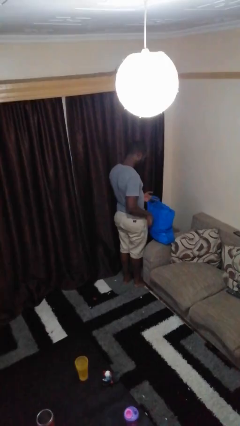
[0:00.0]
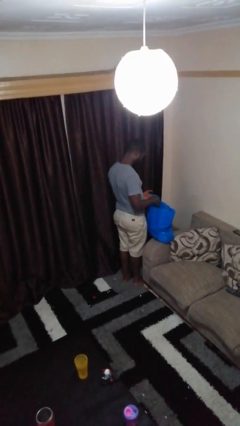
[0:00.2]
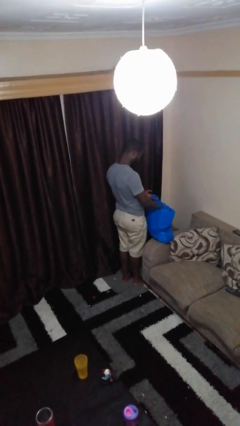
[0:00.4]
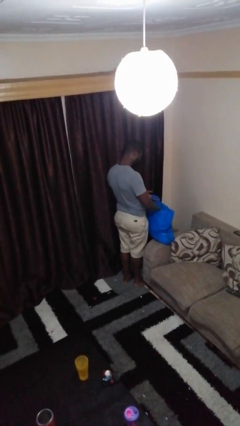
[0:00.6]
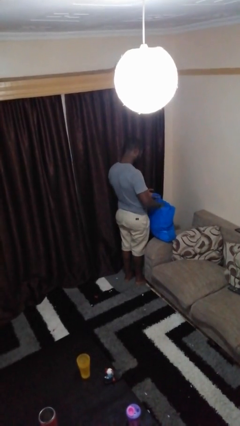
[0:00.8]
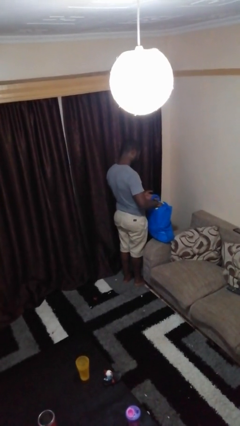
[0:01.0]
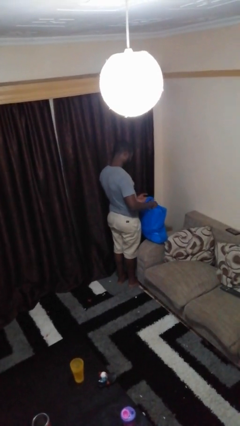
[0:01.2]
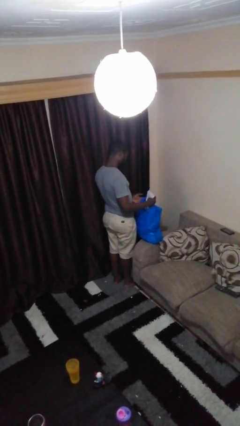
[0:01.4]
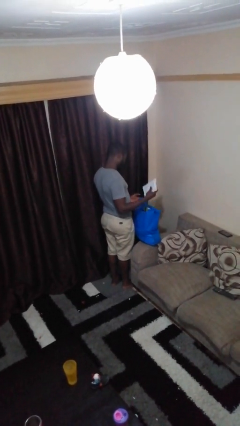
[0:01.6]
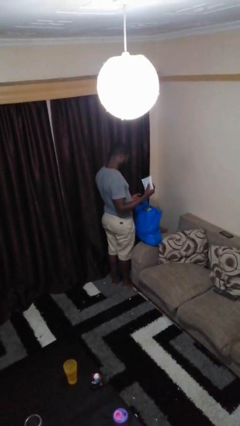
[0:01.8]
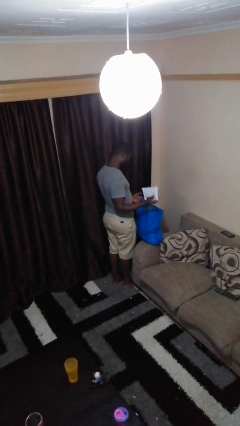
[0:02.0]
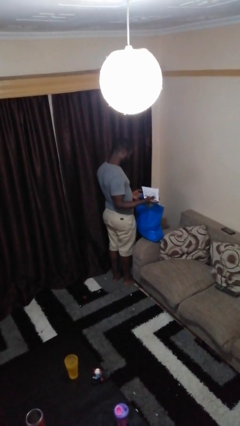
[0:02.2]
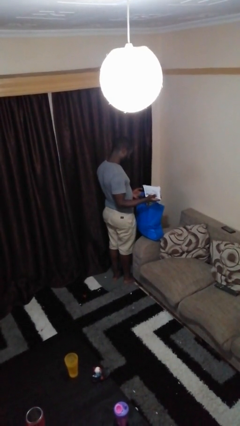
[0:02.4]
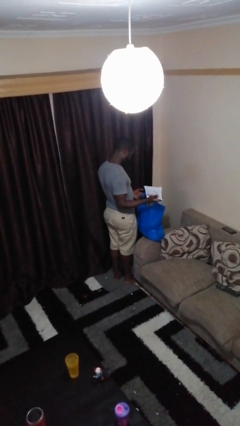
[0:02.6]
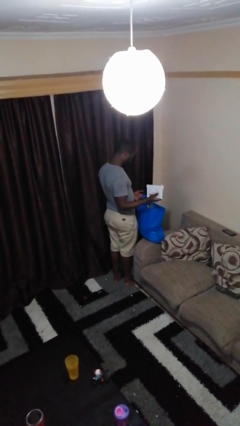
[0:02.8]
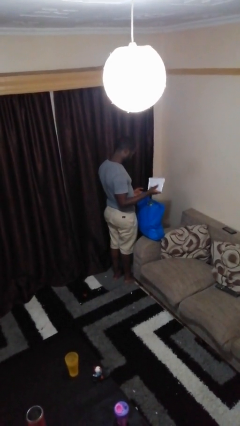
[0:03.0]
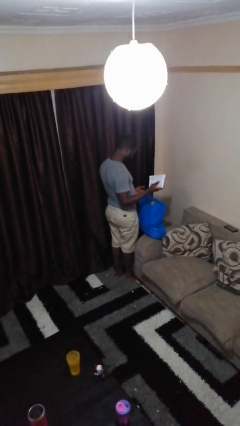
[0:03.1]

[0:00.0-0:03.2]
person takes object from bag

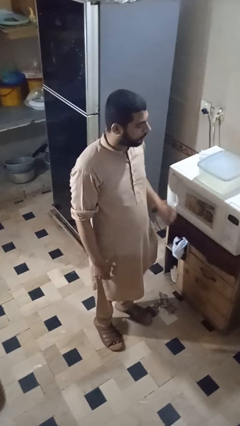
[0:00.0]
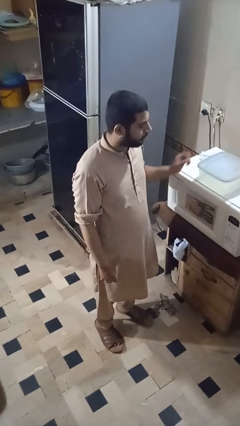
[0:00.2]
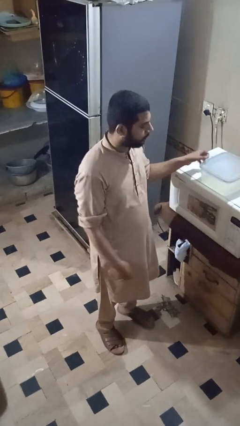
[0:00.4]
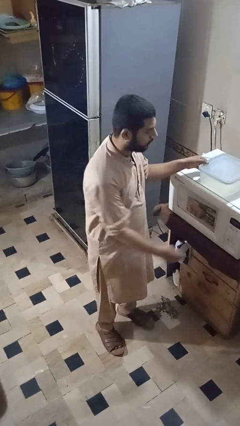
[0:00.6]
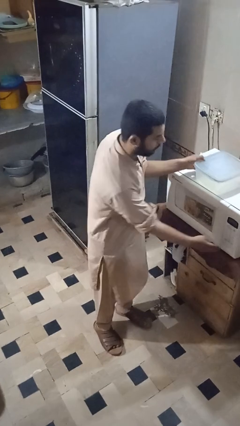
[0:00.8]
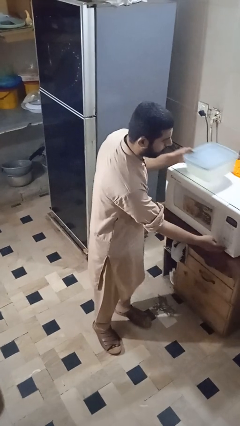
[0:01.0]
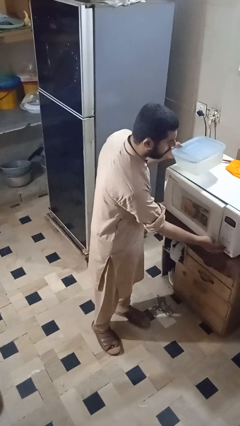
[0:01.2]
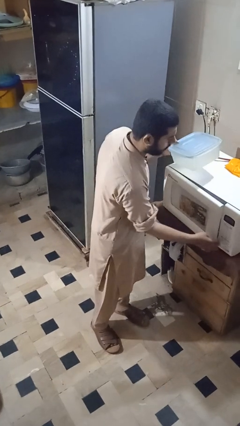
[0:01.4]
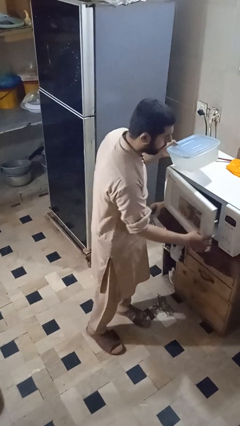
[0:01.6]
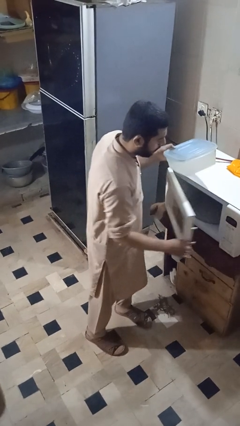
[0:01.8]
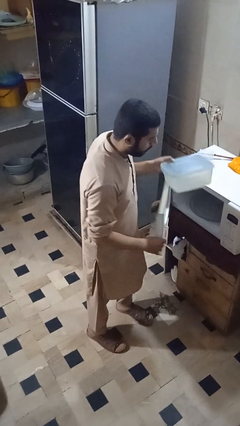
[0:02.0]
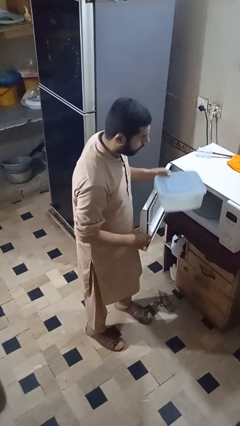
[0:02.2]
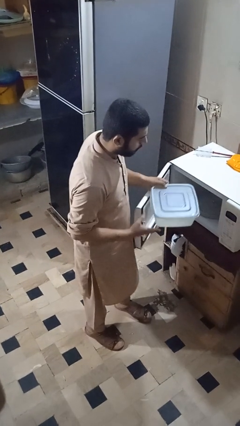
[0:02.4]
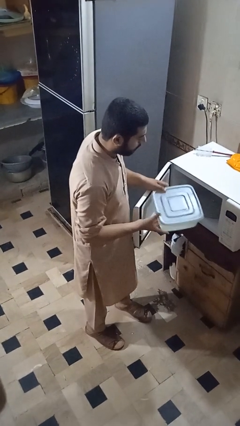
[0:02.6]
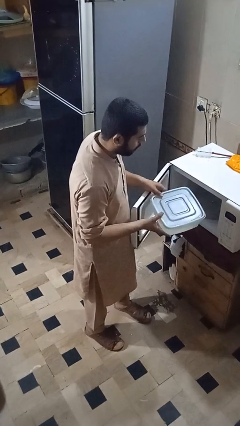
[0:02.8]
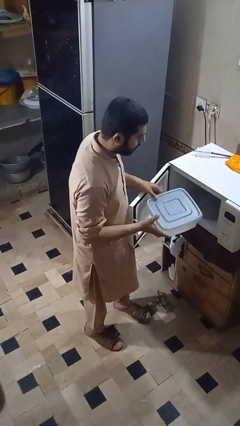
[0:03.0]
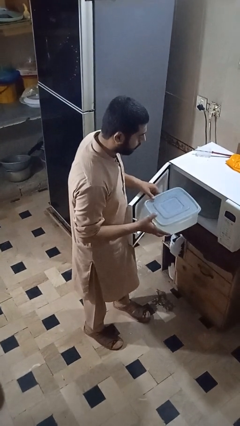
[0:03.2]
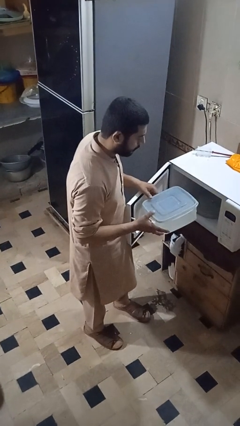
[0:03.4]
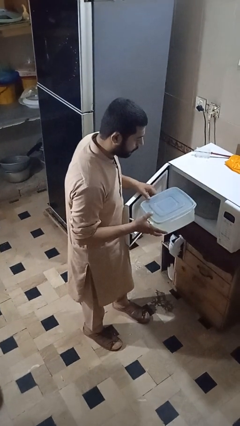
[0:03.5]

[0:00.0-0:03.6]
person opens microwave

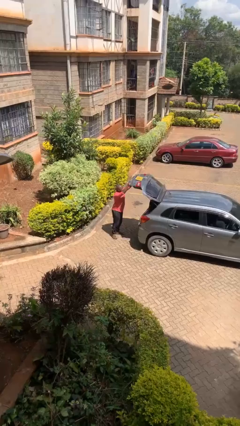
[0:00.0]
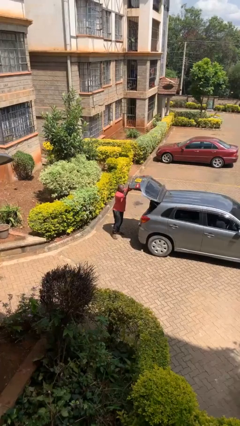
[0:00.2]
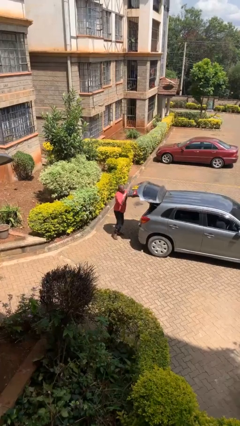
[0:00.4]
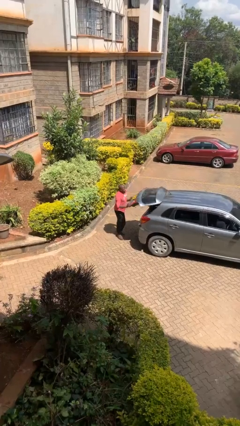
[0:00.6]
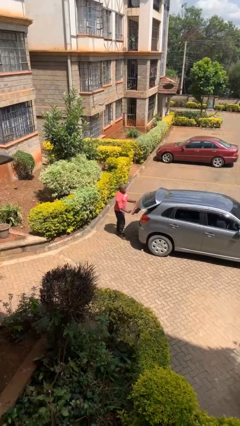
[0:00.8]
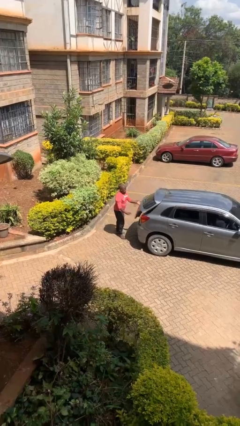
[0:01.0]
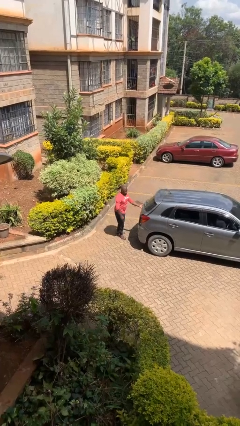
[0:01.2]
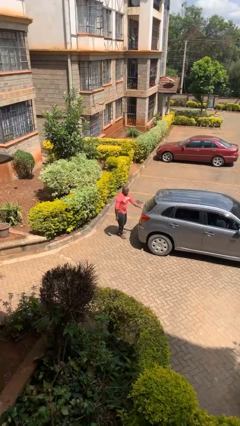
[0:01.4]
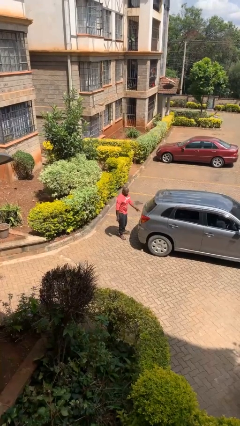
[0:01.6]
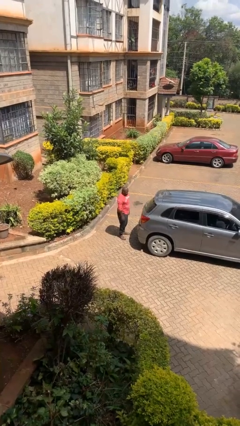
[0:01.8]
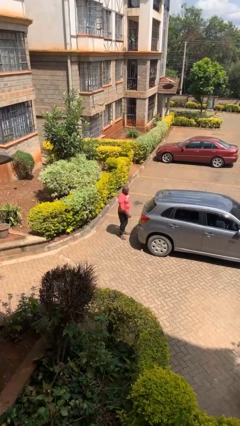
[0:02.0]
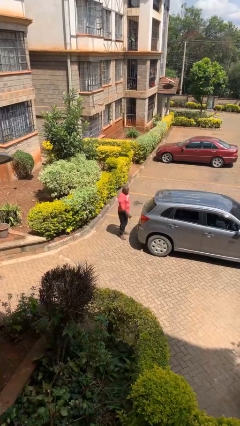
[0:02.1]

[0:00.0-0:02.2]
person closes car trunk

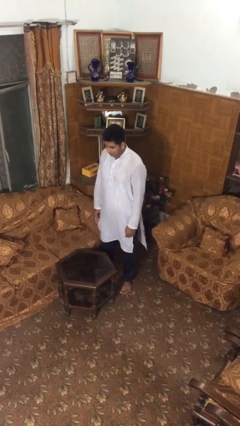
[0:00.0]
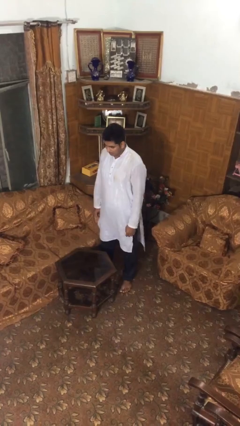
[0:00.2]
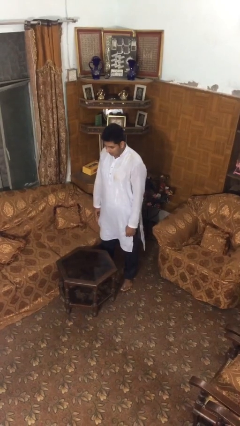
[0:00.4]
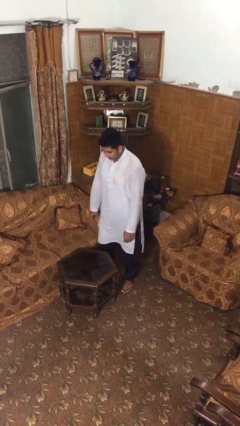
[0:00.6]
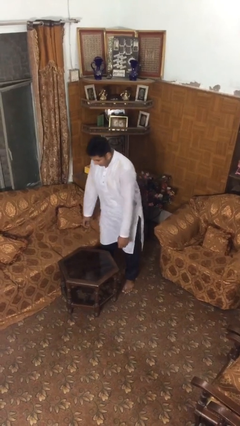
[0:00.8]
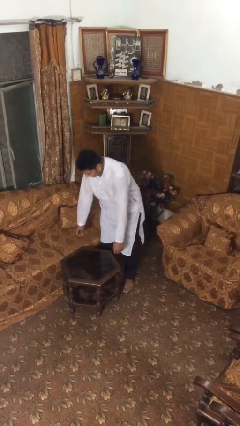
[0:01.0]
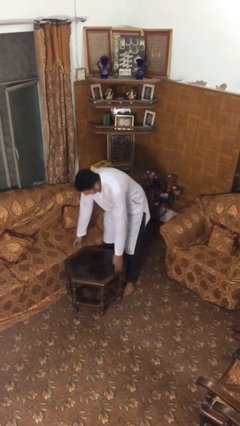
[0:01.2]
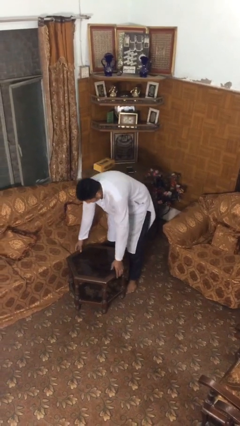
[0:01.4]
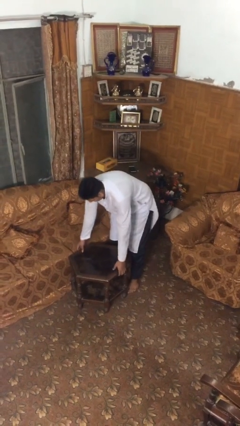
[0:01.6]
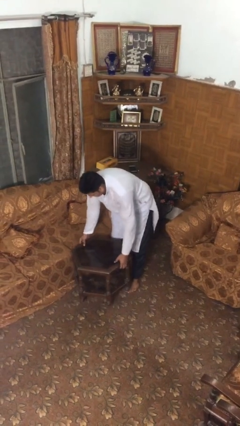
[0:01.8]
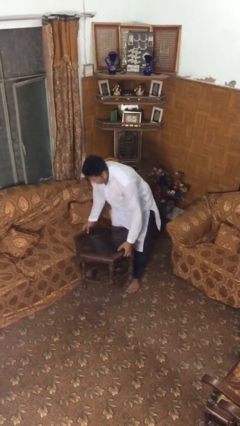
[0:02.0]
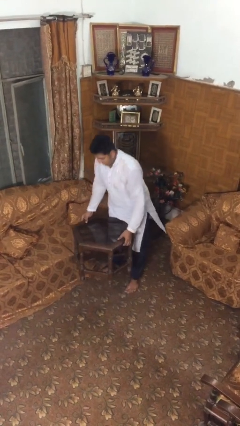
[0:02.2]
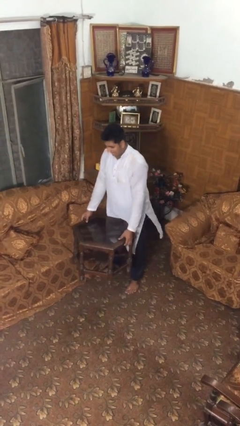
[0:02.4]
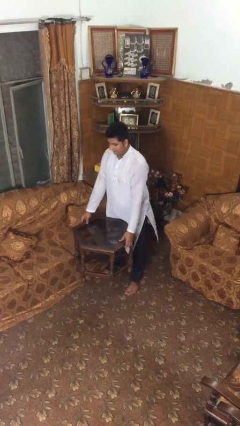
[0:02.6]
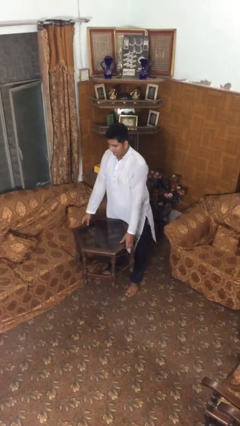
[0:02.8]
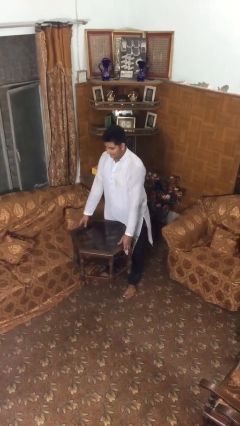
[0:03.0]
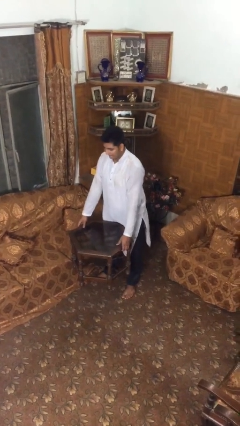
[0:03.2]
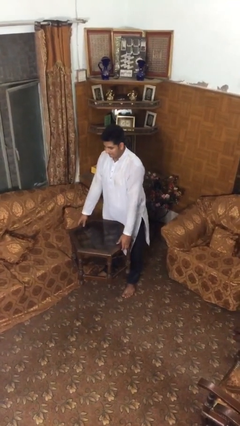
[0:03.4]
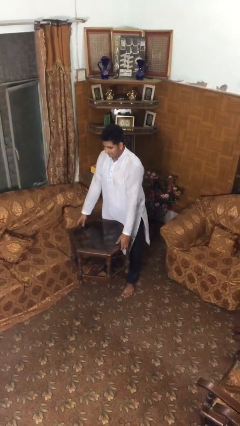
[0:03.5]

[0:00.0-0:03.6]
person picks up object from floor

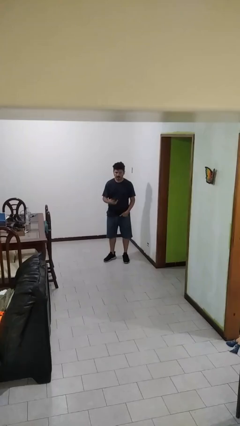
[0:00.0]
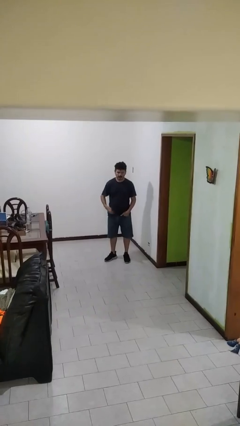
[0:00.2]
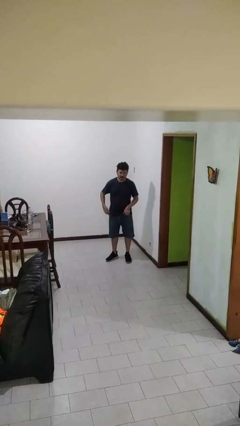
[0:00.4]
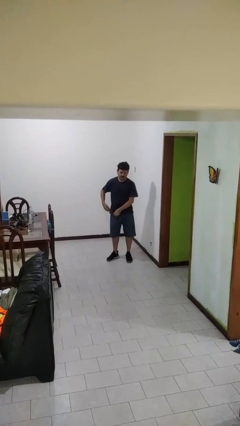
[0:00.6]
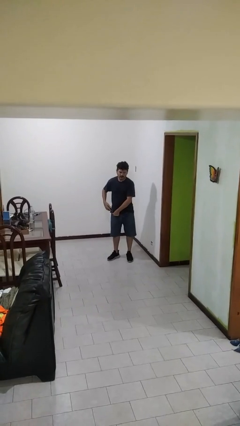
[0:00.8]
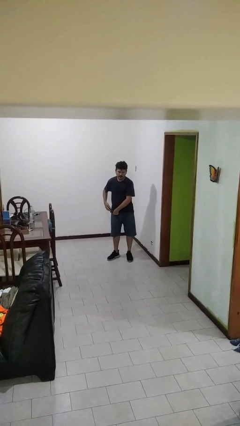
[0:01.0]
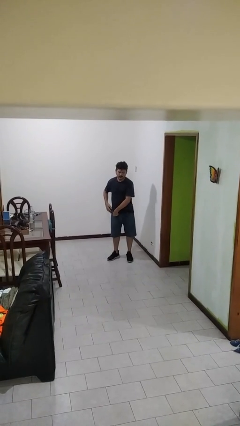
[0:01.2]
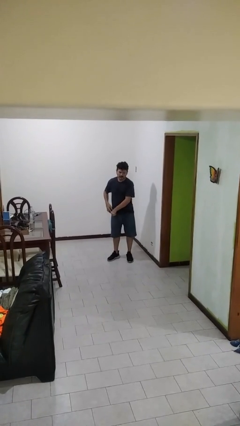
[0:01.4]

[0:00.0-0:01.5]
person puts phone into pocket

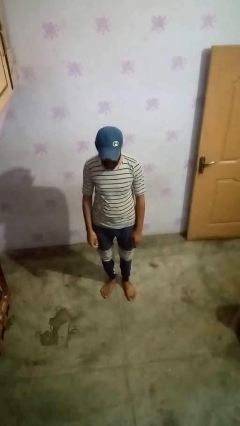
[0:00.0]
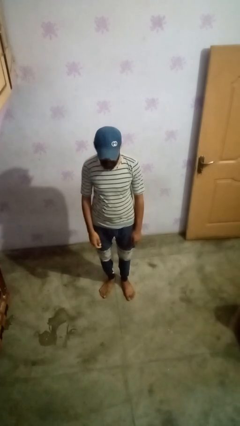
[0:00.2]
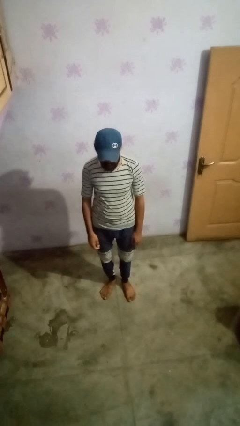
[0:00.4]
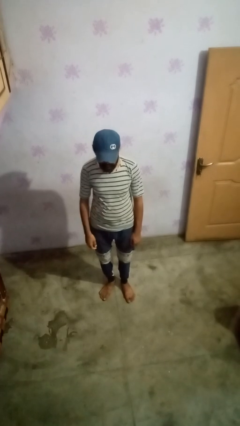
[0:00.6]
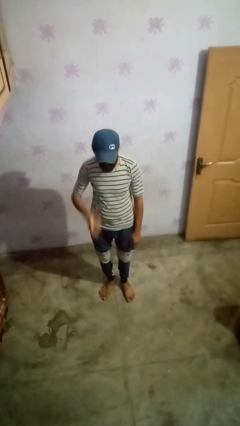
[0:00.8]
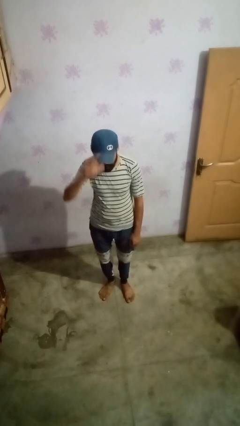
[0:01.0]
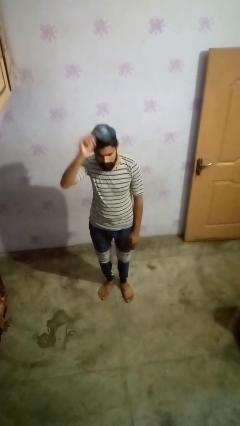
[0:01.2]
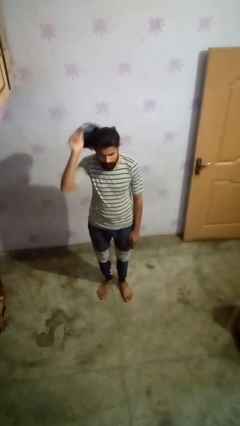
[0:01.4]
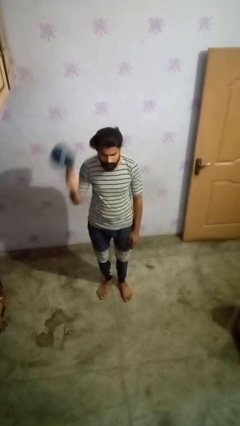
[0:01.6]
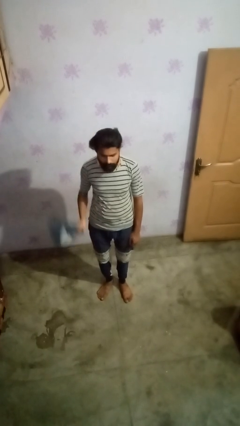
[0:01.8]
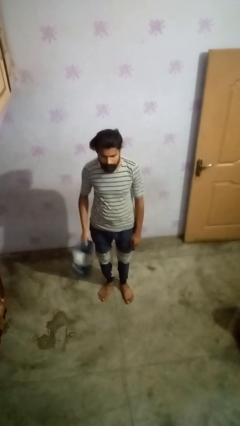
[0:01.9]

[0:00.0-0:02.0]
person takes off hat

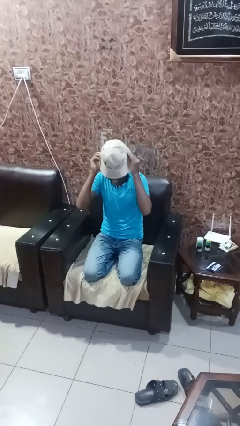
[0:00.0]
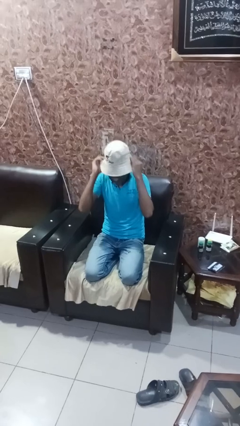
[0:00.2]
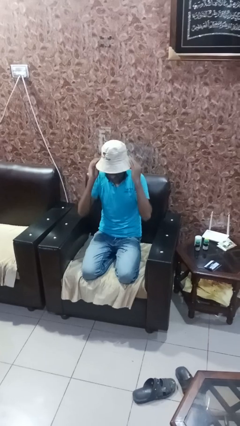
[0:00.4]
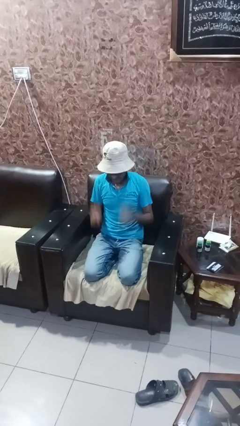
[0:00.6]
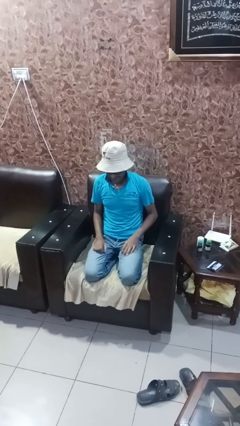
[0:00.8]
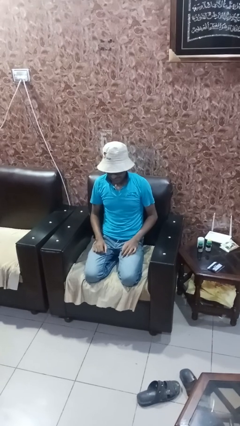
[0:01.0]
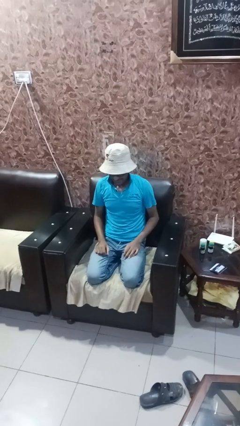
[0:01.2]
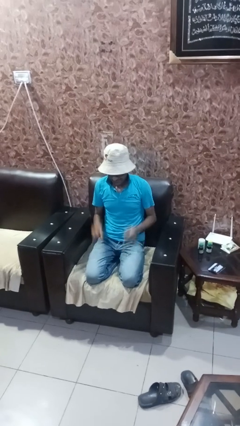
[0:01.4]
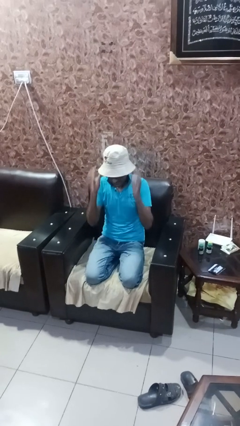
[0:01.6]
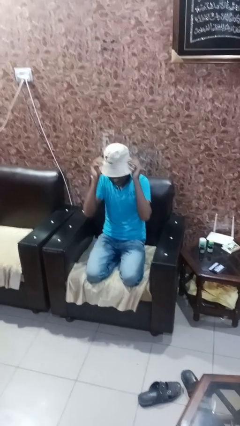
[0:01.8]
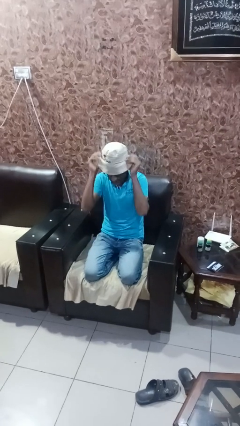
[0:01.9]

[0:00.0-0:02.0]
person puts on hat
